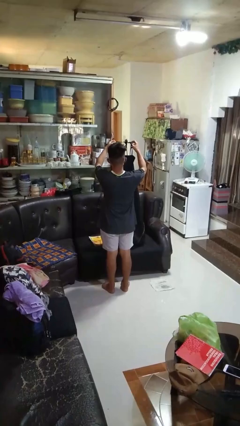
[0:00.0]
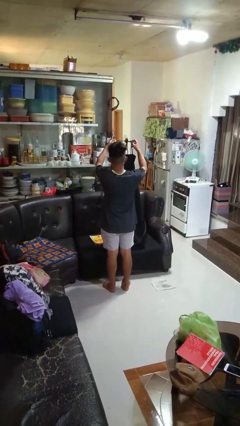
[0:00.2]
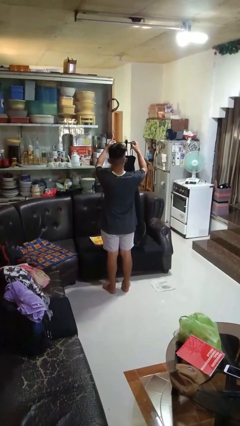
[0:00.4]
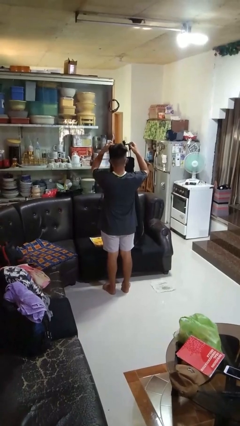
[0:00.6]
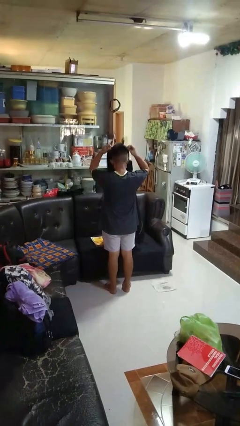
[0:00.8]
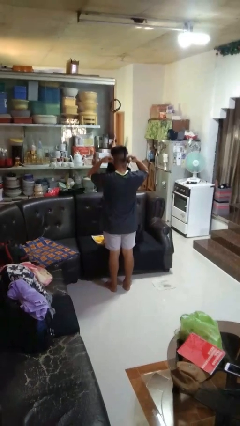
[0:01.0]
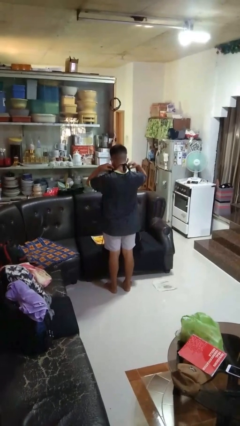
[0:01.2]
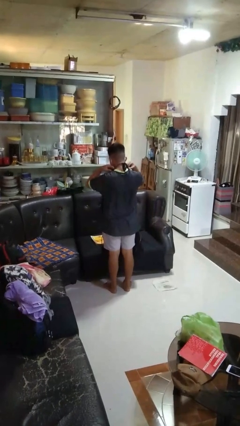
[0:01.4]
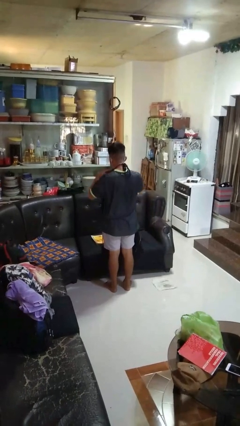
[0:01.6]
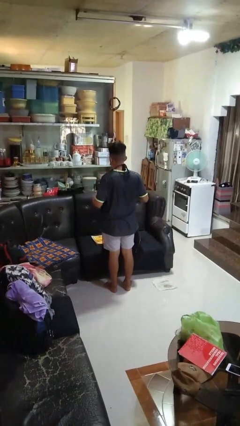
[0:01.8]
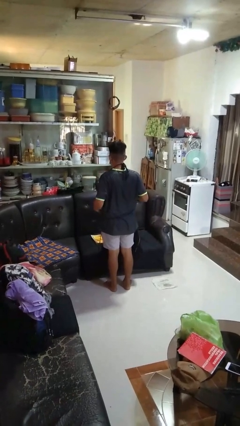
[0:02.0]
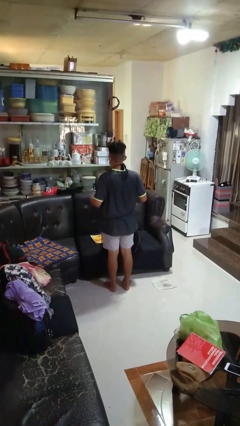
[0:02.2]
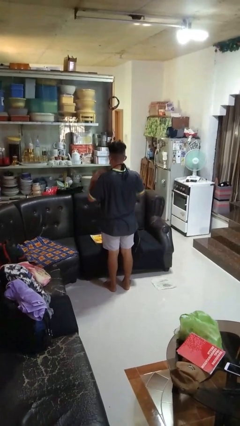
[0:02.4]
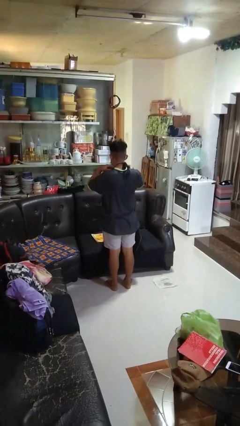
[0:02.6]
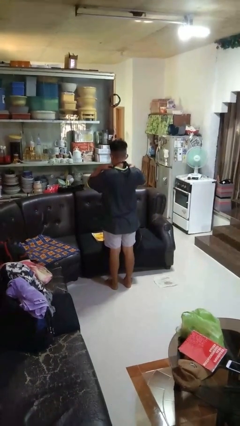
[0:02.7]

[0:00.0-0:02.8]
person puts on apron

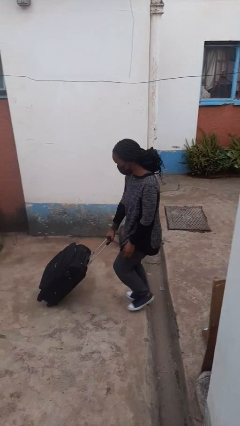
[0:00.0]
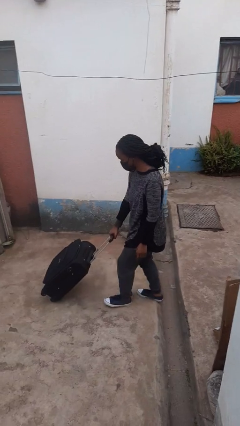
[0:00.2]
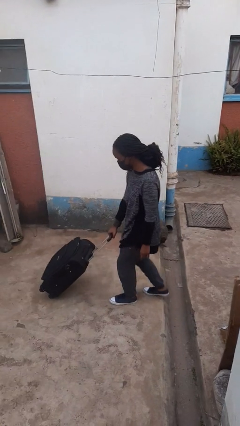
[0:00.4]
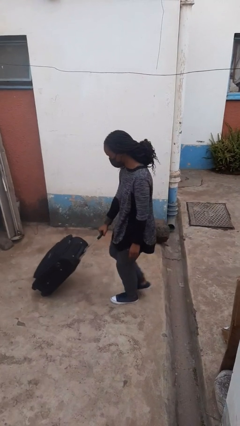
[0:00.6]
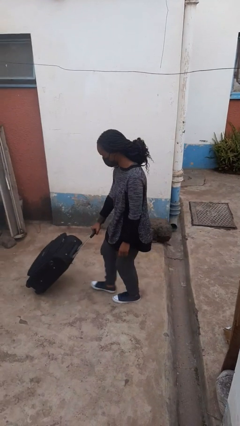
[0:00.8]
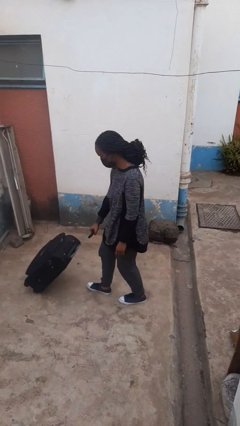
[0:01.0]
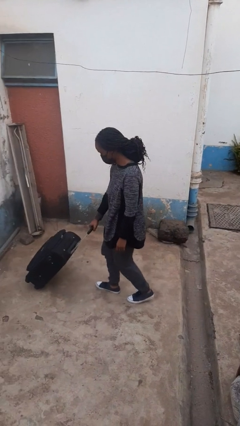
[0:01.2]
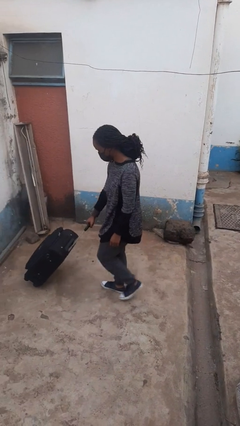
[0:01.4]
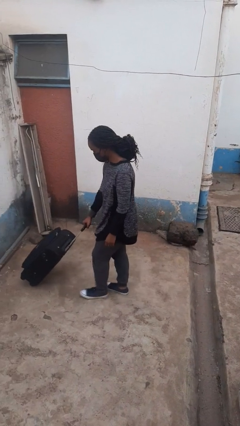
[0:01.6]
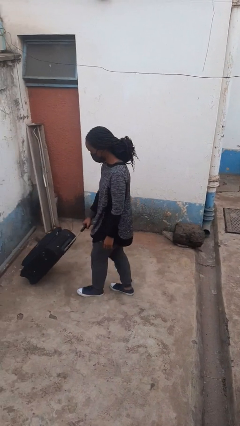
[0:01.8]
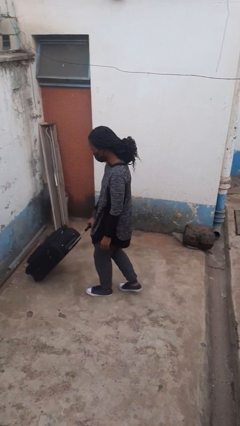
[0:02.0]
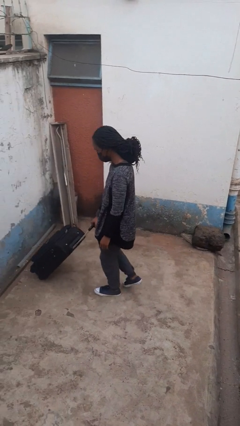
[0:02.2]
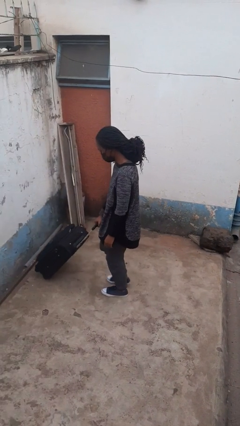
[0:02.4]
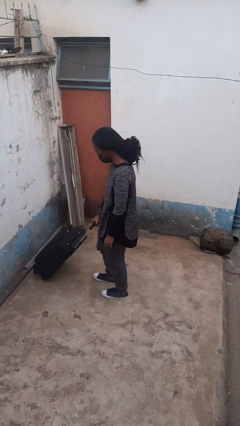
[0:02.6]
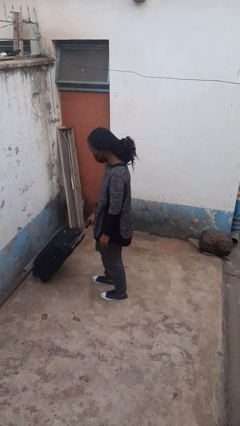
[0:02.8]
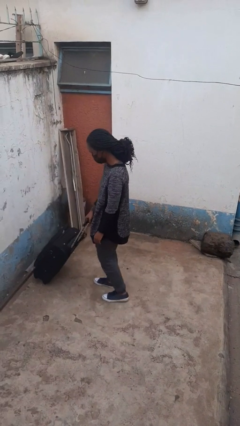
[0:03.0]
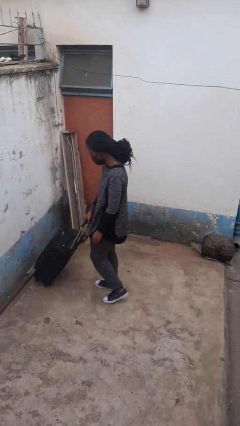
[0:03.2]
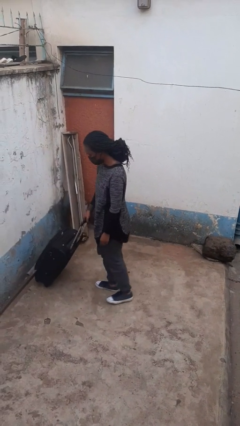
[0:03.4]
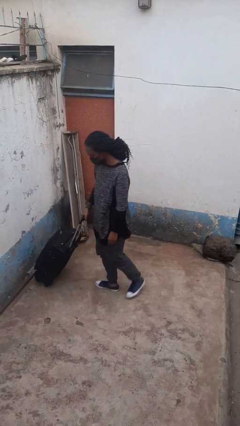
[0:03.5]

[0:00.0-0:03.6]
person pushes wheeled cart

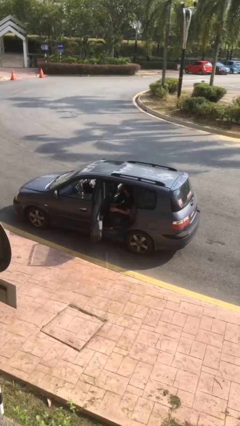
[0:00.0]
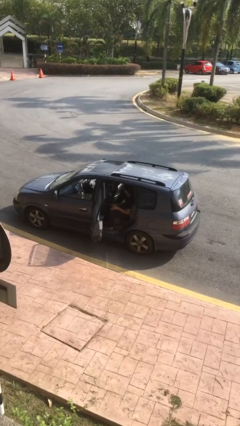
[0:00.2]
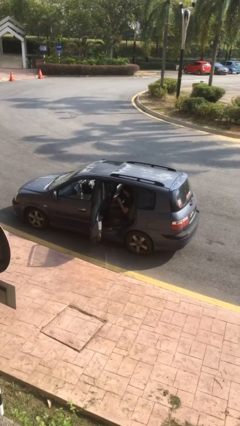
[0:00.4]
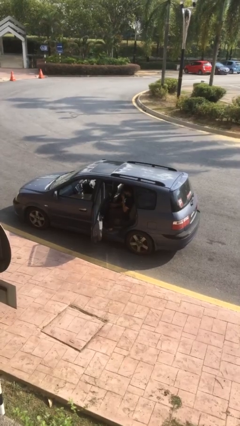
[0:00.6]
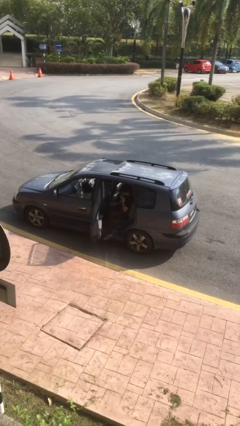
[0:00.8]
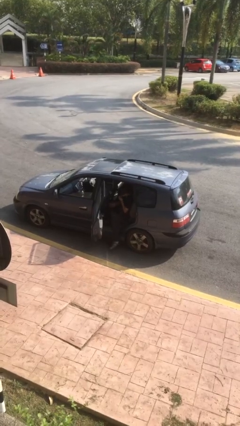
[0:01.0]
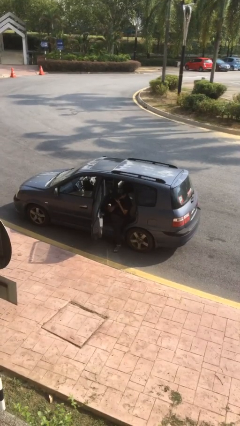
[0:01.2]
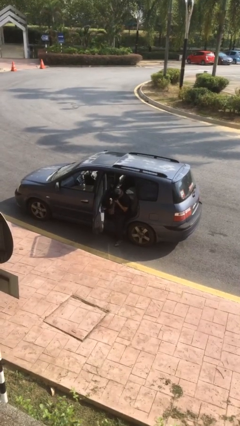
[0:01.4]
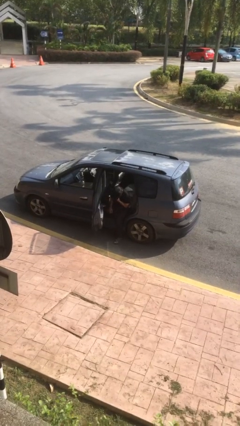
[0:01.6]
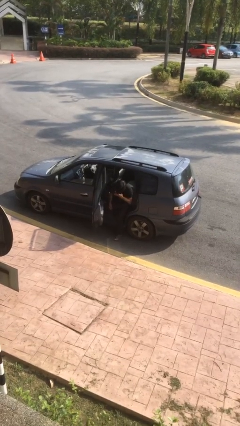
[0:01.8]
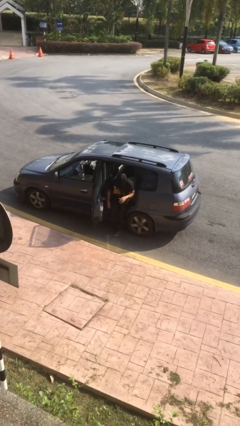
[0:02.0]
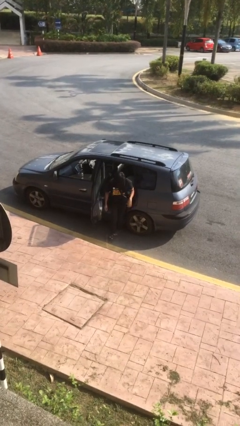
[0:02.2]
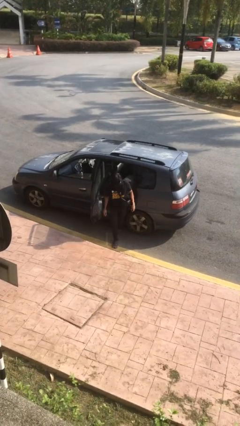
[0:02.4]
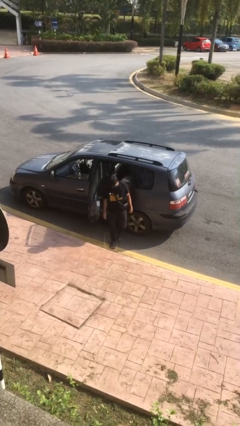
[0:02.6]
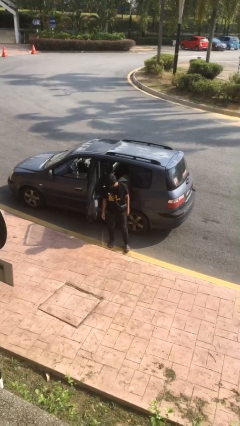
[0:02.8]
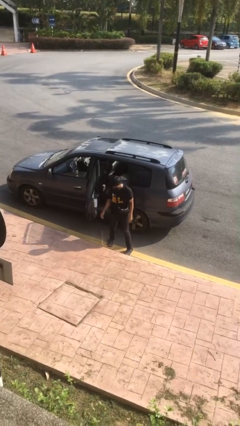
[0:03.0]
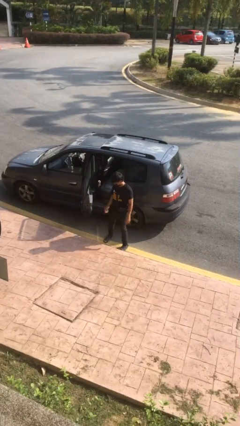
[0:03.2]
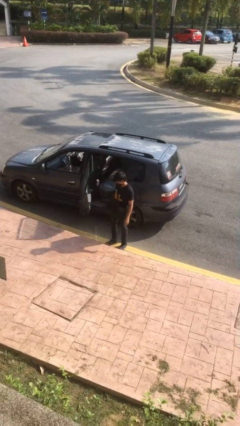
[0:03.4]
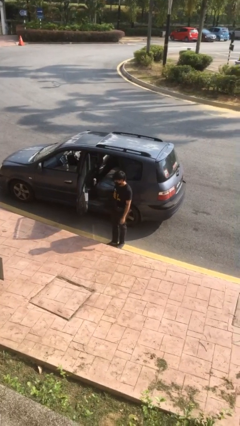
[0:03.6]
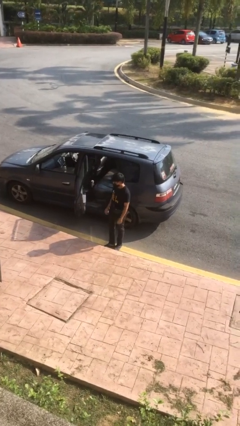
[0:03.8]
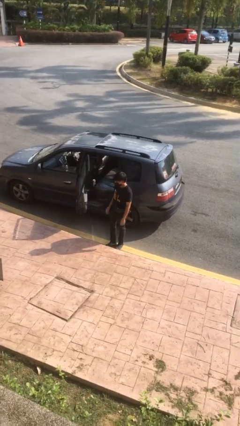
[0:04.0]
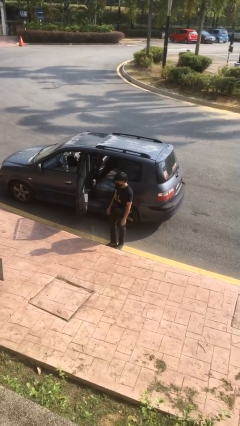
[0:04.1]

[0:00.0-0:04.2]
person exits car

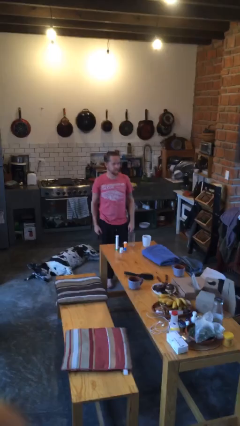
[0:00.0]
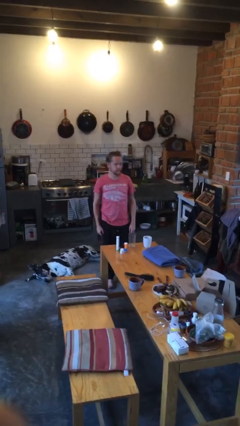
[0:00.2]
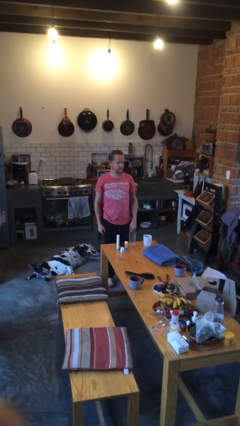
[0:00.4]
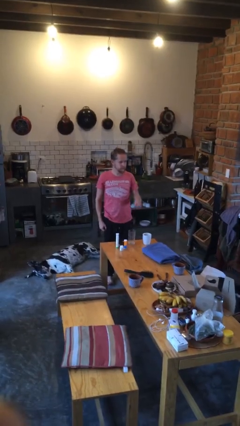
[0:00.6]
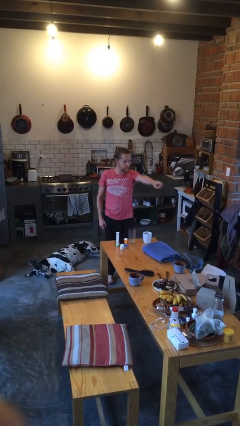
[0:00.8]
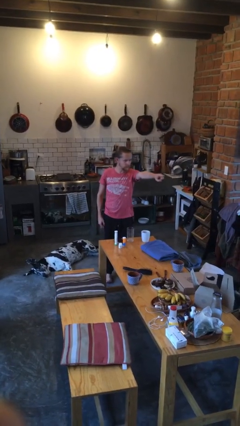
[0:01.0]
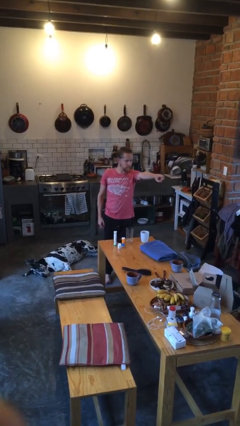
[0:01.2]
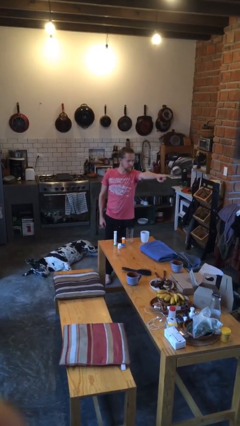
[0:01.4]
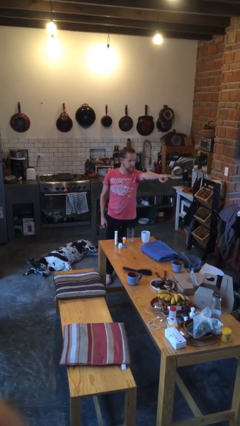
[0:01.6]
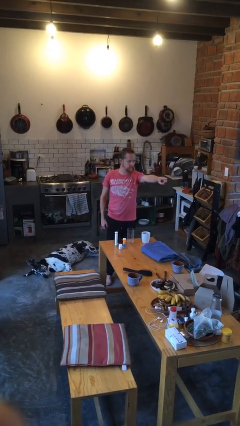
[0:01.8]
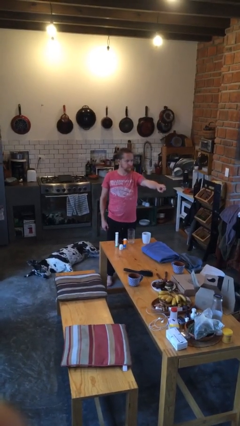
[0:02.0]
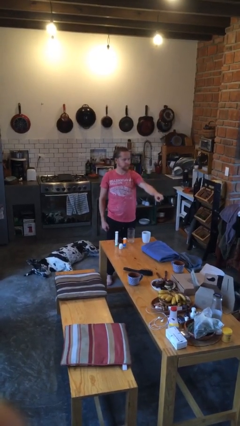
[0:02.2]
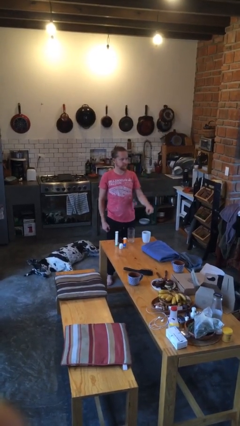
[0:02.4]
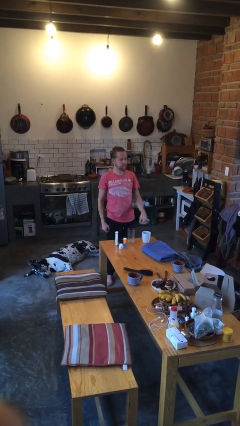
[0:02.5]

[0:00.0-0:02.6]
person points at person

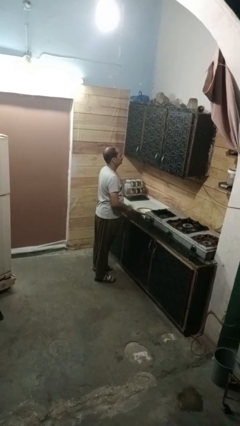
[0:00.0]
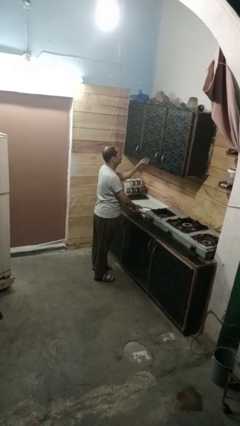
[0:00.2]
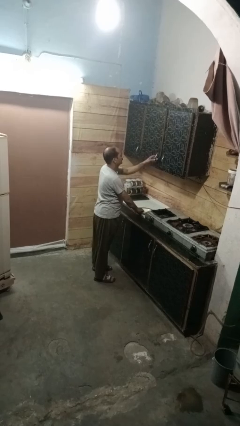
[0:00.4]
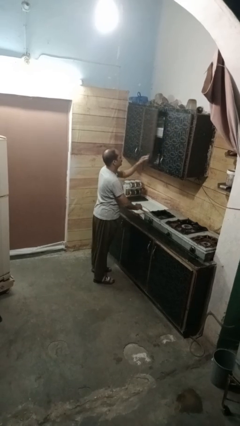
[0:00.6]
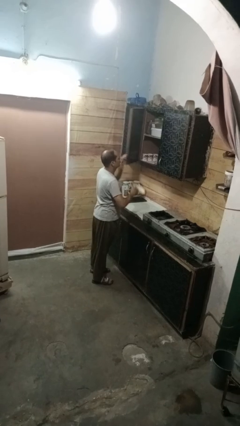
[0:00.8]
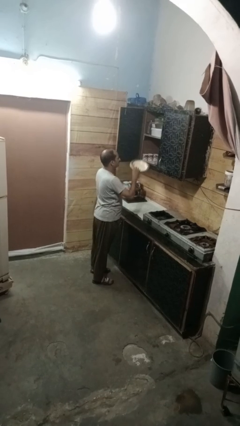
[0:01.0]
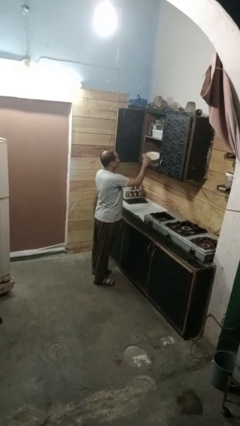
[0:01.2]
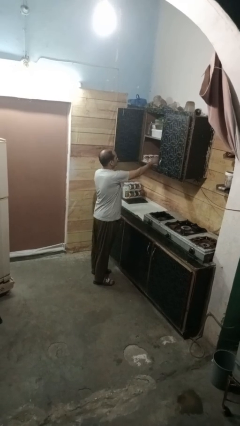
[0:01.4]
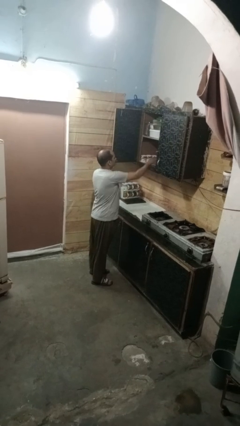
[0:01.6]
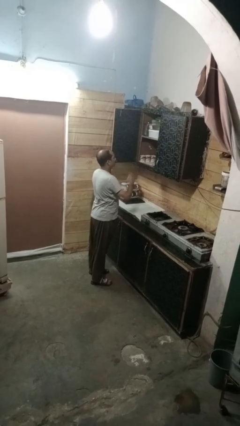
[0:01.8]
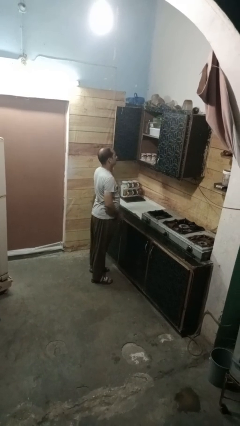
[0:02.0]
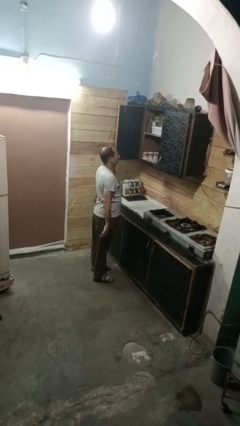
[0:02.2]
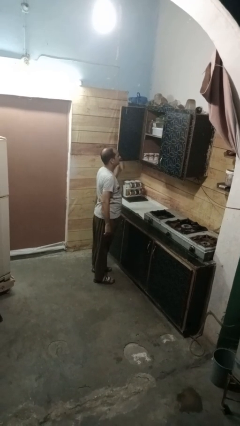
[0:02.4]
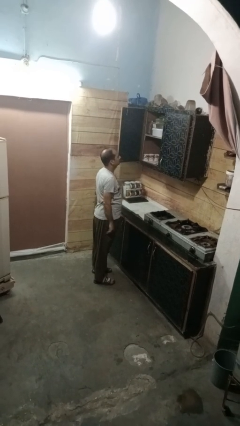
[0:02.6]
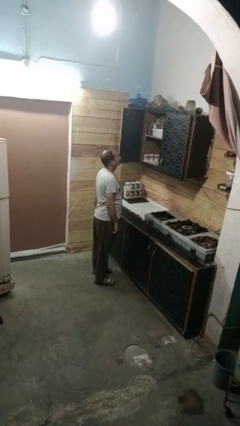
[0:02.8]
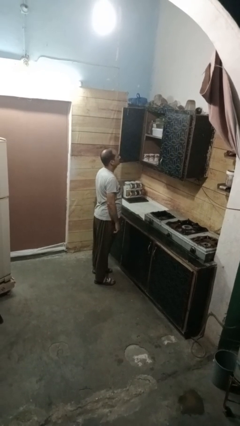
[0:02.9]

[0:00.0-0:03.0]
person puts object in cabinet

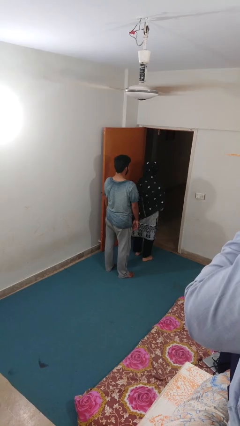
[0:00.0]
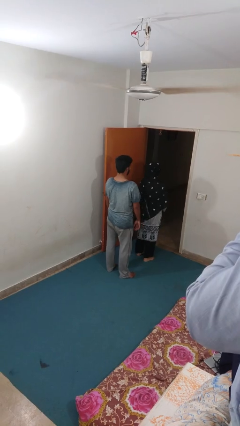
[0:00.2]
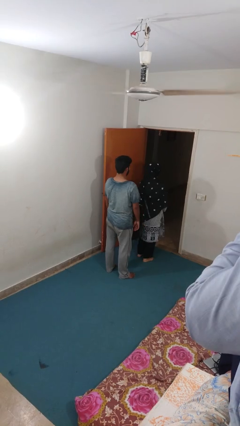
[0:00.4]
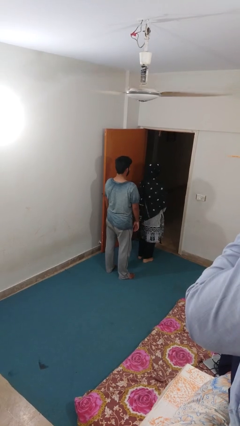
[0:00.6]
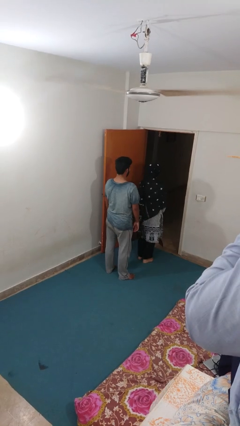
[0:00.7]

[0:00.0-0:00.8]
person grabs person by shoulder
